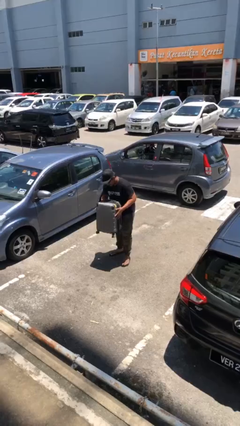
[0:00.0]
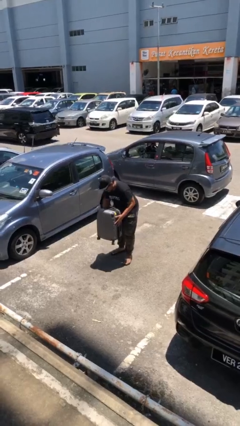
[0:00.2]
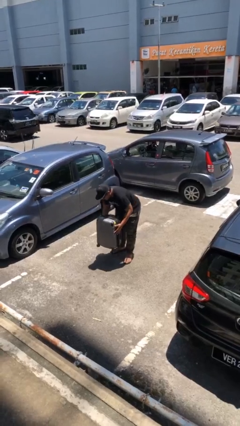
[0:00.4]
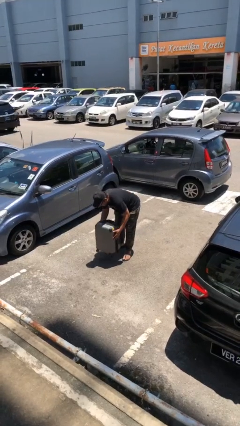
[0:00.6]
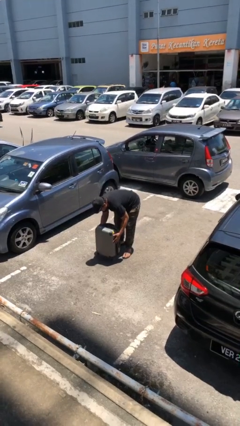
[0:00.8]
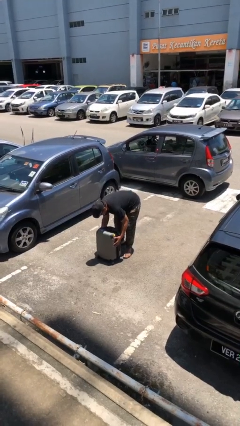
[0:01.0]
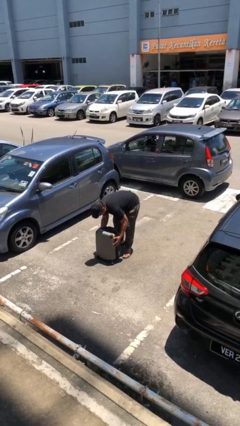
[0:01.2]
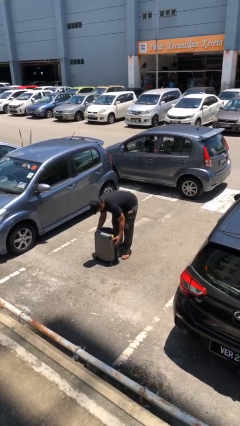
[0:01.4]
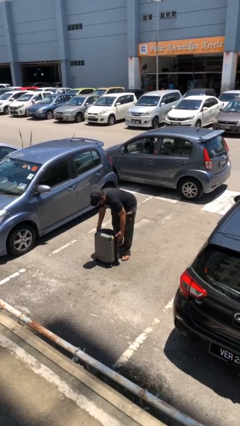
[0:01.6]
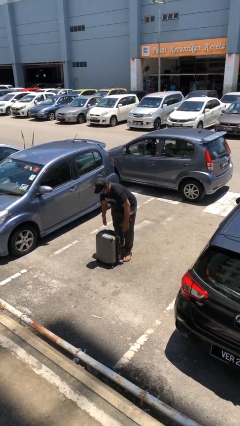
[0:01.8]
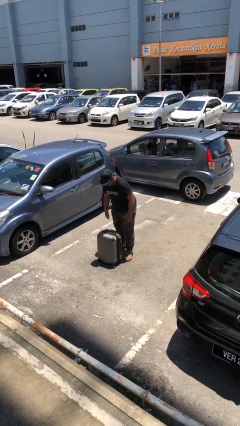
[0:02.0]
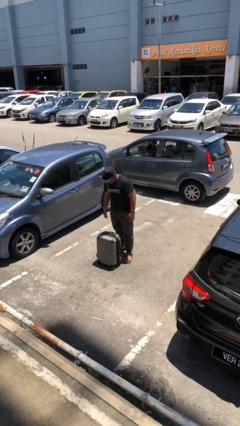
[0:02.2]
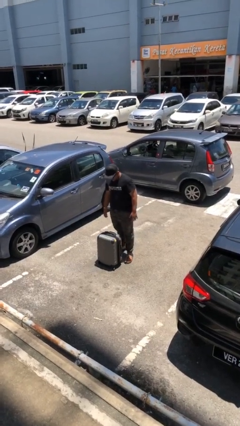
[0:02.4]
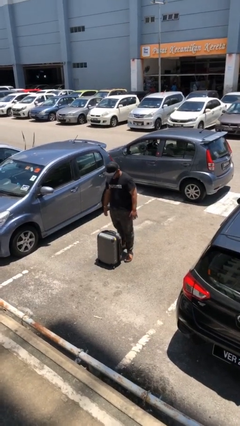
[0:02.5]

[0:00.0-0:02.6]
person puts down object on floor

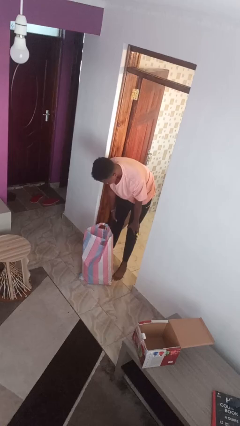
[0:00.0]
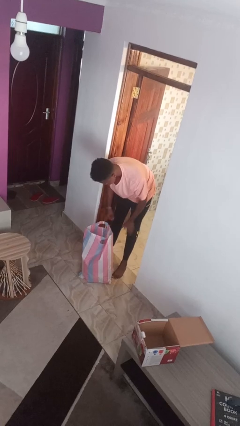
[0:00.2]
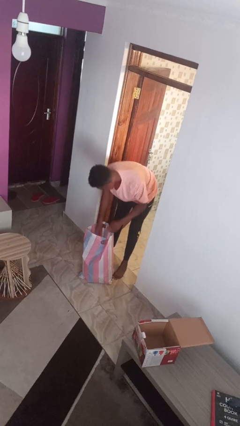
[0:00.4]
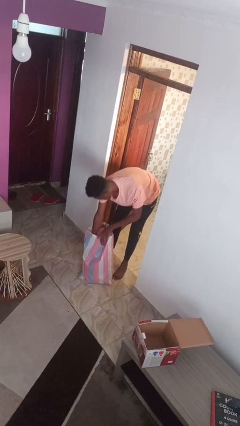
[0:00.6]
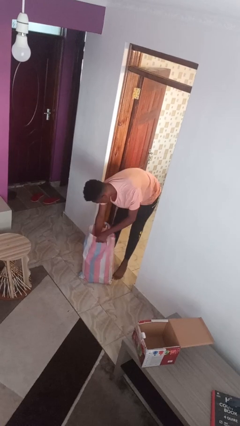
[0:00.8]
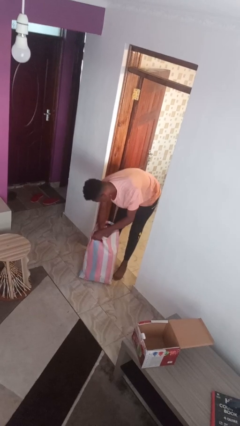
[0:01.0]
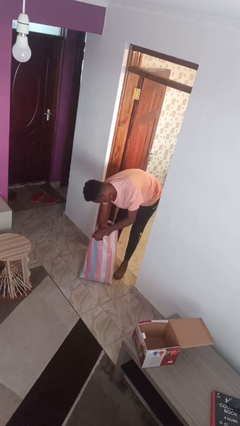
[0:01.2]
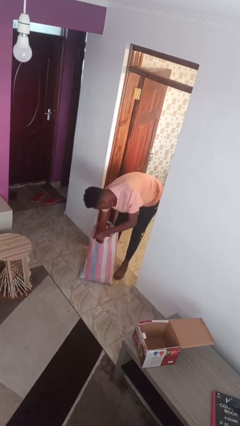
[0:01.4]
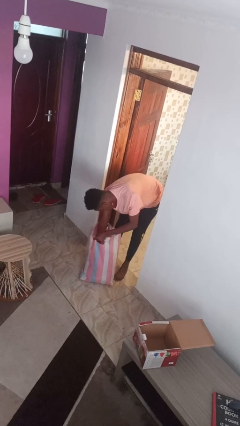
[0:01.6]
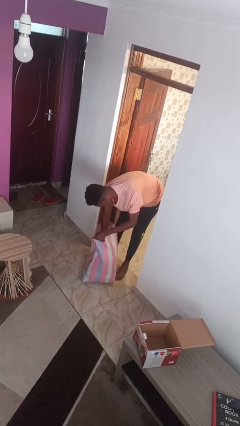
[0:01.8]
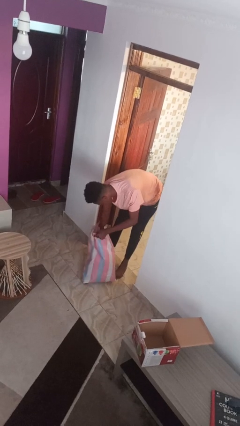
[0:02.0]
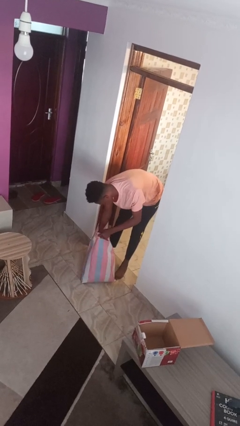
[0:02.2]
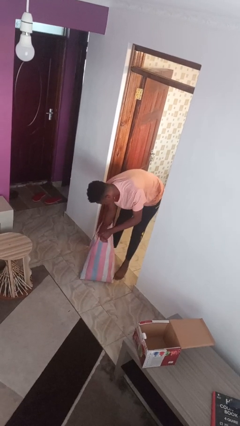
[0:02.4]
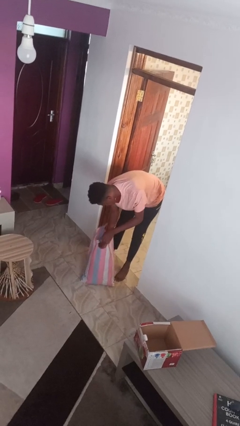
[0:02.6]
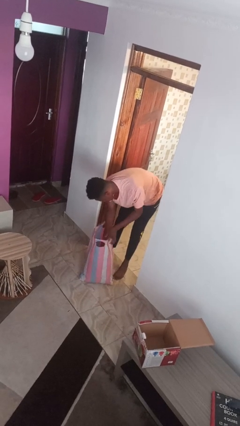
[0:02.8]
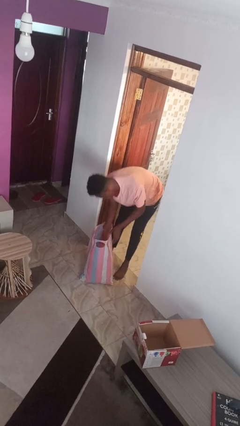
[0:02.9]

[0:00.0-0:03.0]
person searches in bag

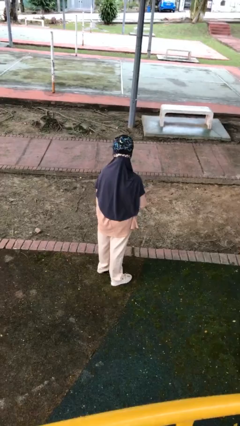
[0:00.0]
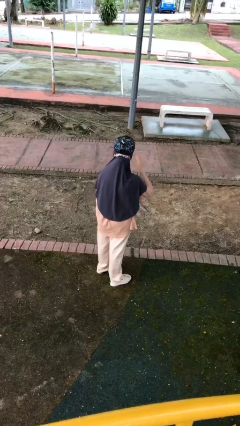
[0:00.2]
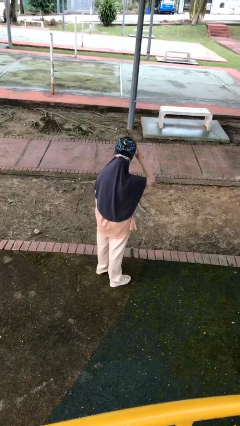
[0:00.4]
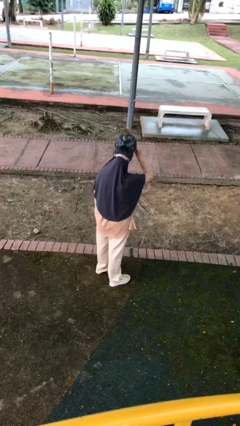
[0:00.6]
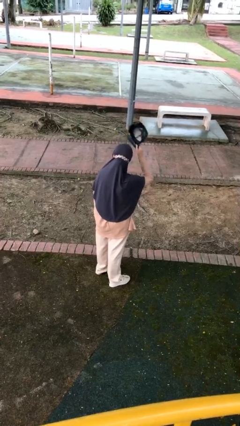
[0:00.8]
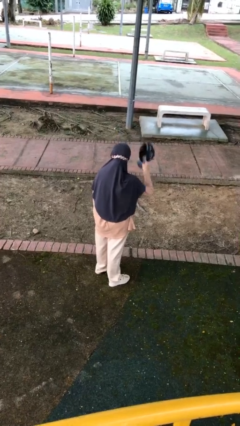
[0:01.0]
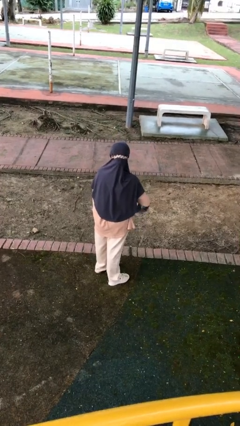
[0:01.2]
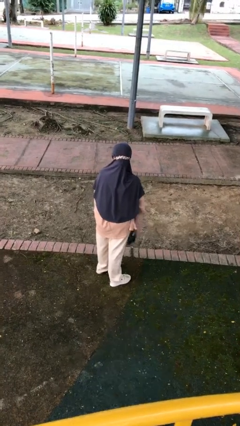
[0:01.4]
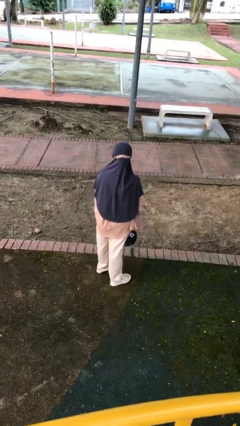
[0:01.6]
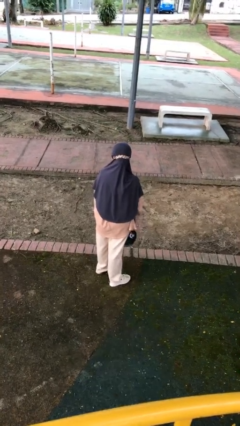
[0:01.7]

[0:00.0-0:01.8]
person takes off hat

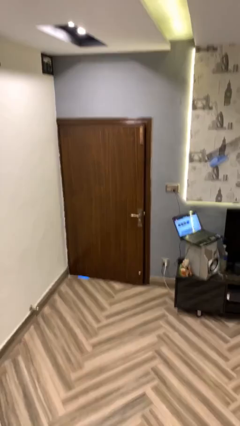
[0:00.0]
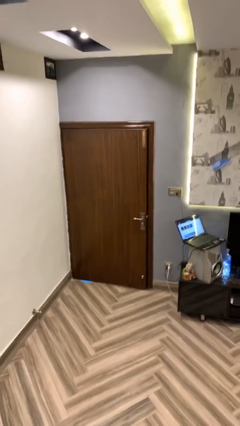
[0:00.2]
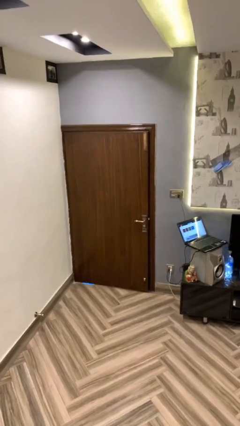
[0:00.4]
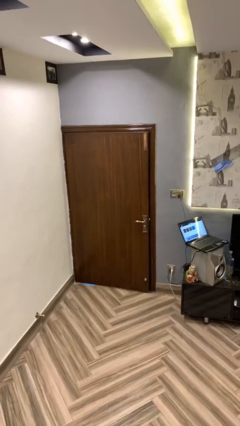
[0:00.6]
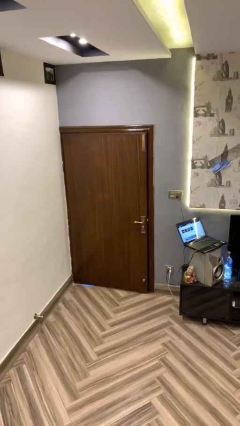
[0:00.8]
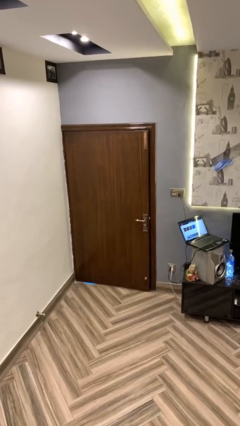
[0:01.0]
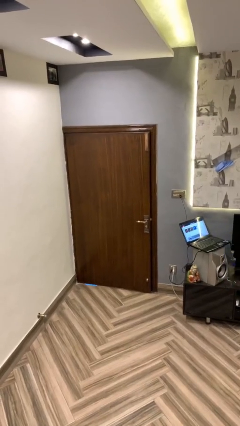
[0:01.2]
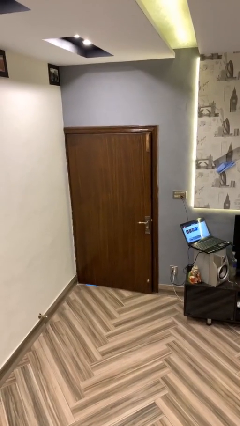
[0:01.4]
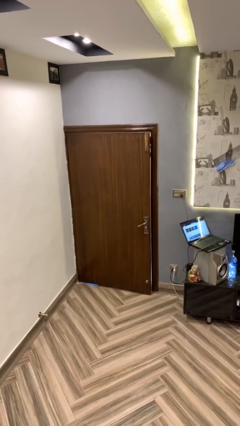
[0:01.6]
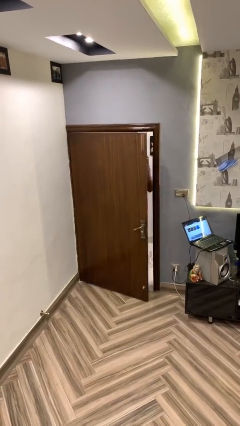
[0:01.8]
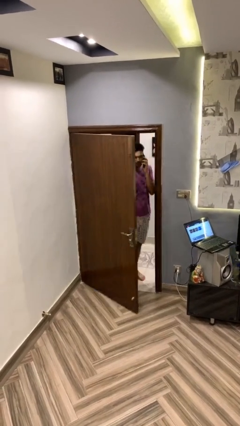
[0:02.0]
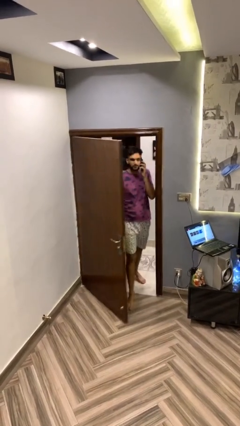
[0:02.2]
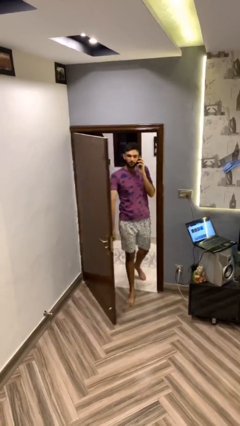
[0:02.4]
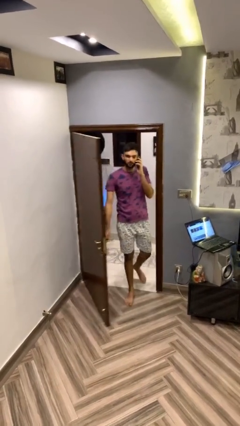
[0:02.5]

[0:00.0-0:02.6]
person opens facility door

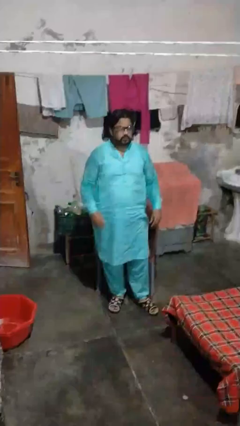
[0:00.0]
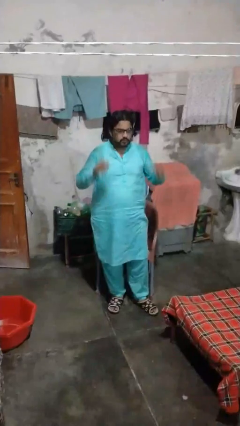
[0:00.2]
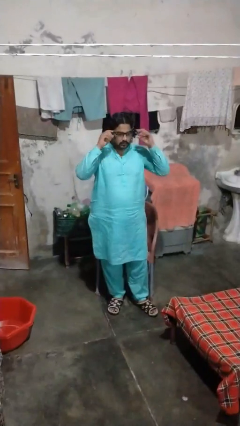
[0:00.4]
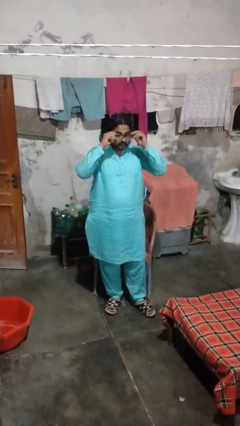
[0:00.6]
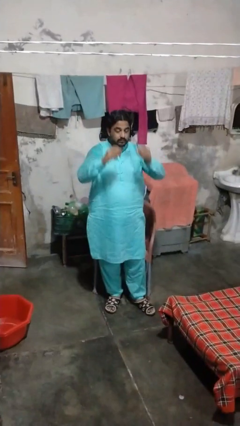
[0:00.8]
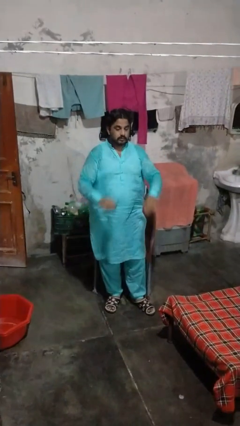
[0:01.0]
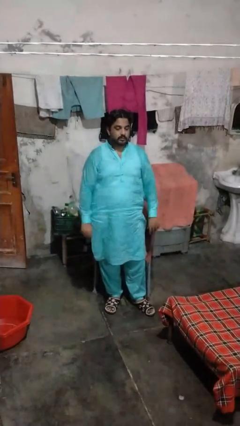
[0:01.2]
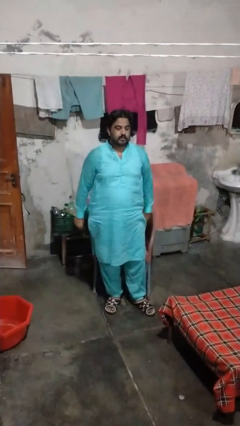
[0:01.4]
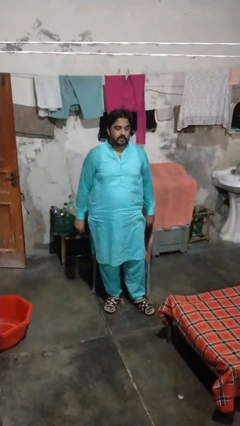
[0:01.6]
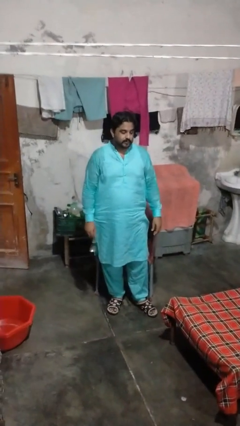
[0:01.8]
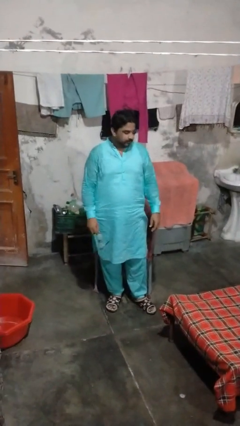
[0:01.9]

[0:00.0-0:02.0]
person takes off glasses

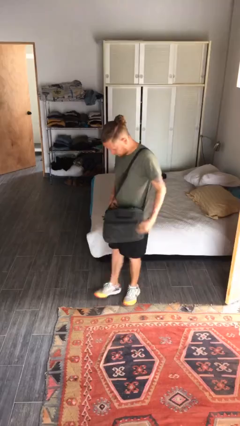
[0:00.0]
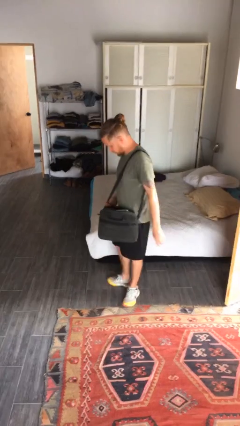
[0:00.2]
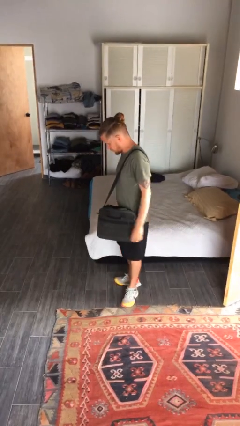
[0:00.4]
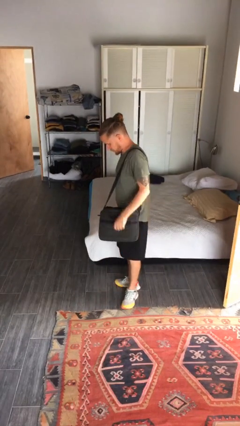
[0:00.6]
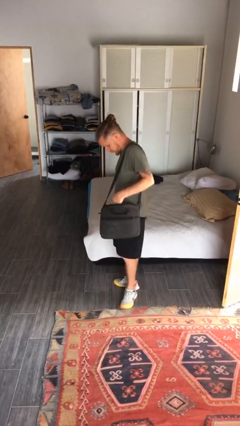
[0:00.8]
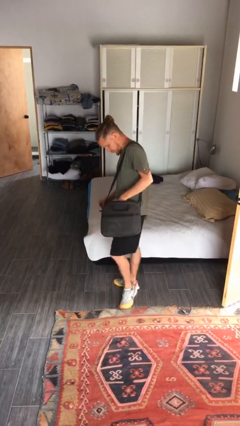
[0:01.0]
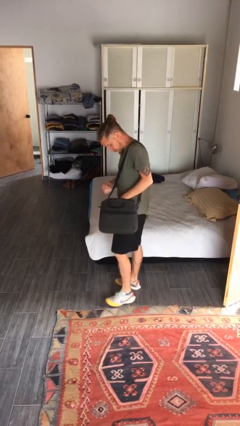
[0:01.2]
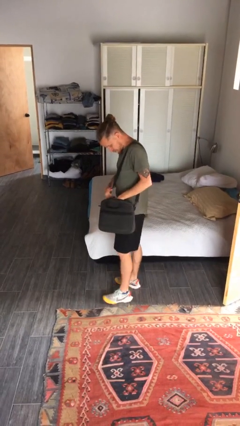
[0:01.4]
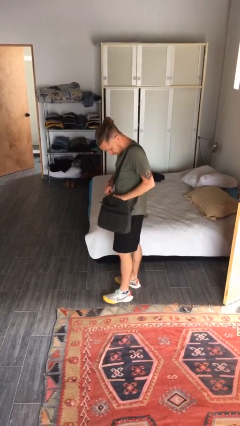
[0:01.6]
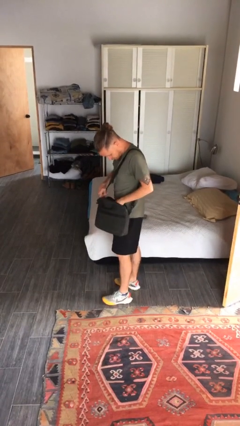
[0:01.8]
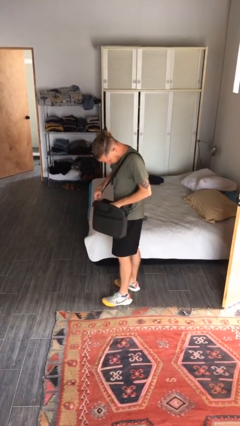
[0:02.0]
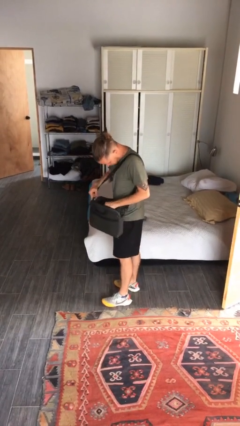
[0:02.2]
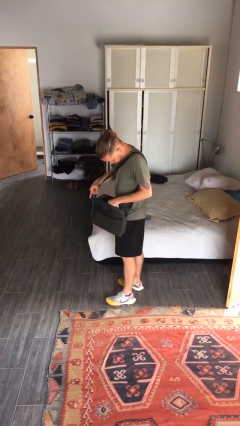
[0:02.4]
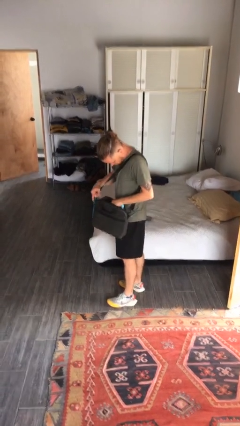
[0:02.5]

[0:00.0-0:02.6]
person searches in purse

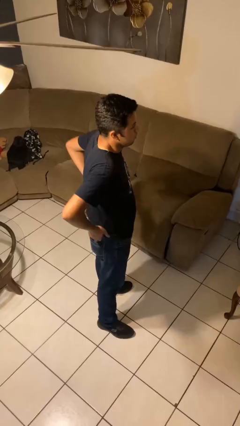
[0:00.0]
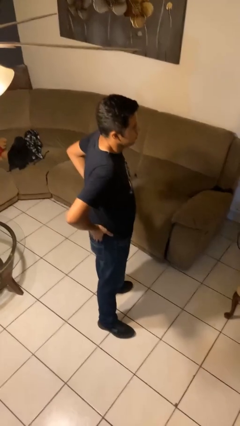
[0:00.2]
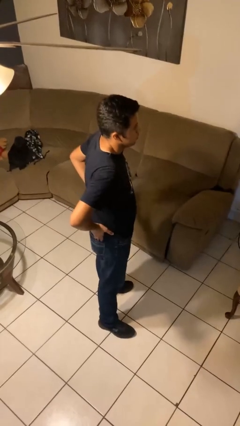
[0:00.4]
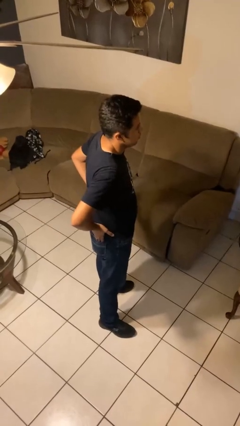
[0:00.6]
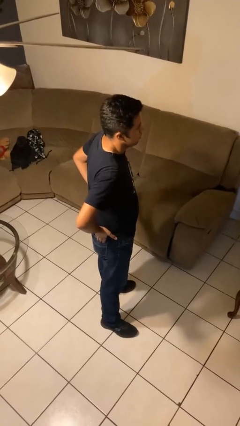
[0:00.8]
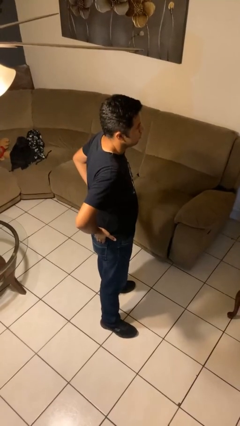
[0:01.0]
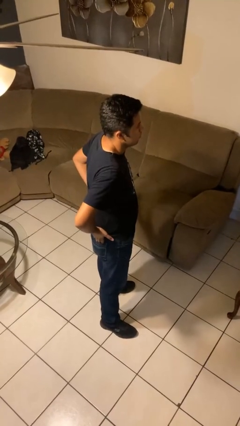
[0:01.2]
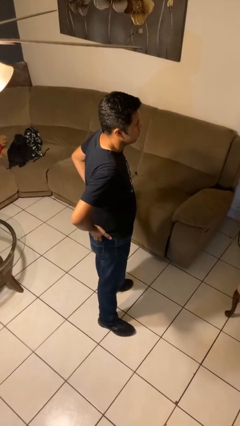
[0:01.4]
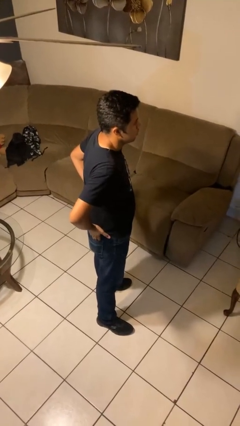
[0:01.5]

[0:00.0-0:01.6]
person puts hands in back pockets

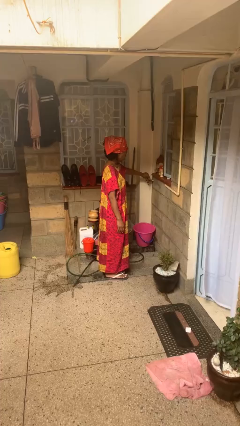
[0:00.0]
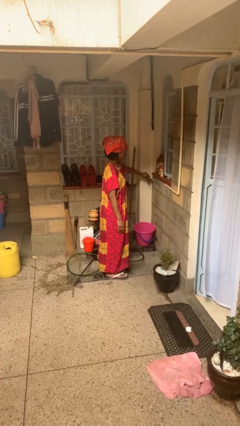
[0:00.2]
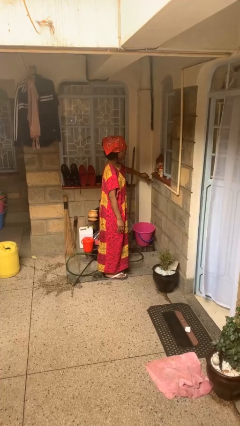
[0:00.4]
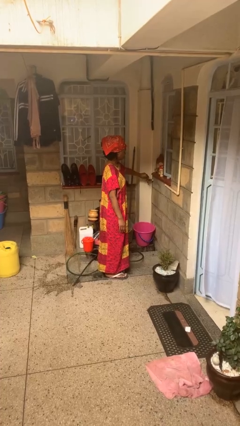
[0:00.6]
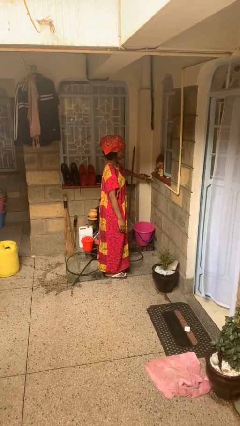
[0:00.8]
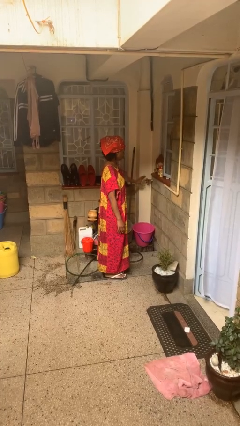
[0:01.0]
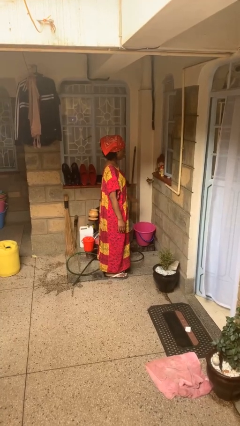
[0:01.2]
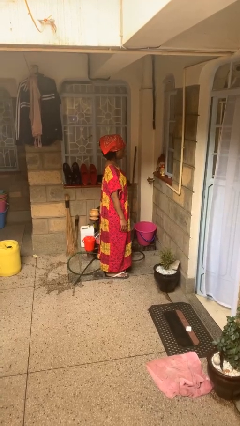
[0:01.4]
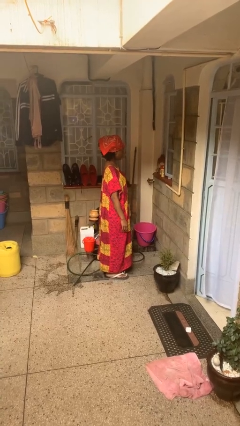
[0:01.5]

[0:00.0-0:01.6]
person turns off faucet
